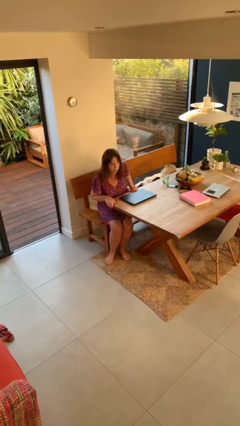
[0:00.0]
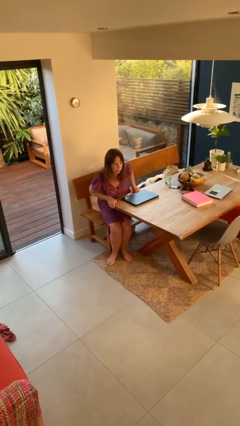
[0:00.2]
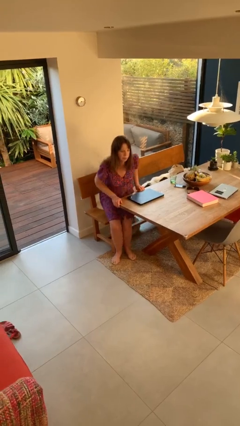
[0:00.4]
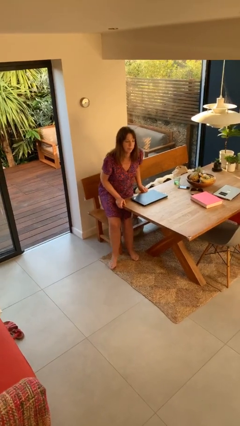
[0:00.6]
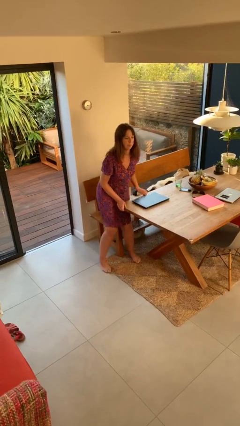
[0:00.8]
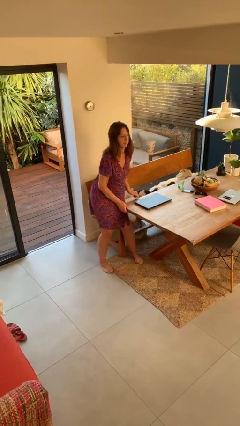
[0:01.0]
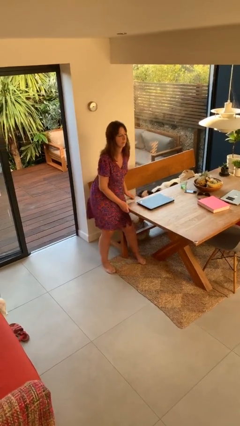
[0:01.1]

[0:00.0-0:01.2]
person stands up

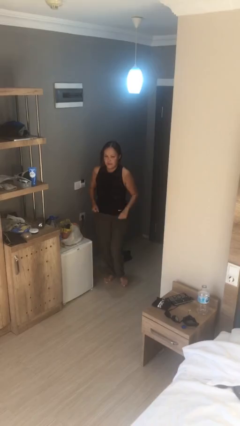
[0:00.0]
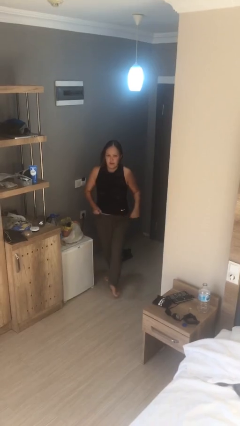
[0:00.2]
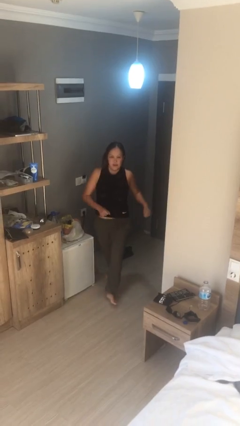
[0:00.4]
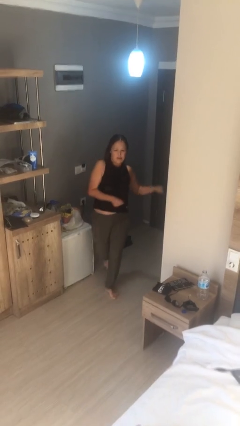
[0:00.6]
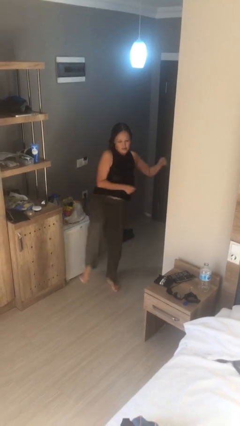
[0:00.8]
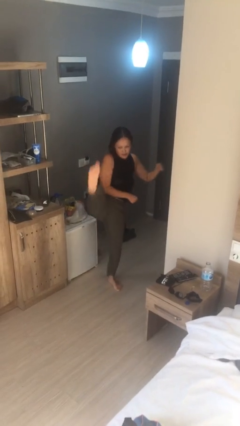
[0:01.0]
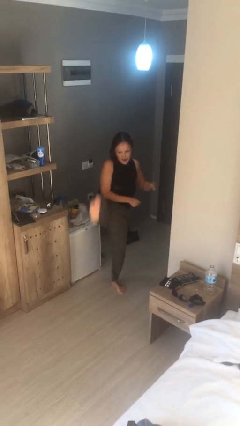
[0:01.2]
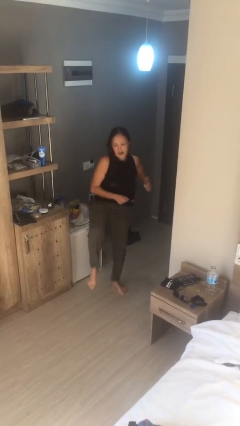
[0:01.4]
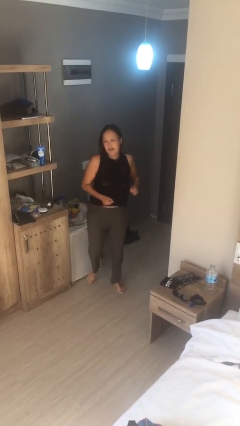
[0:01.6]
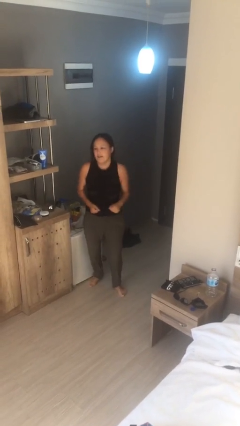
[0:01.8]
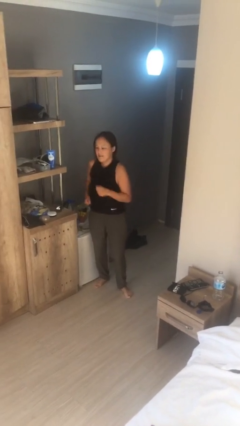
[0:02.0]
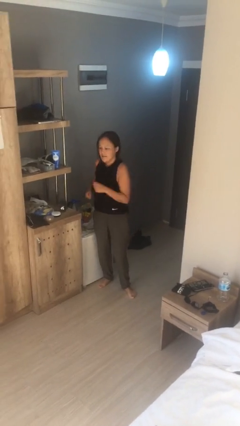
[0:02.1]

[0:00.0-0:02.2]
person karate kicks

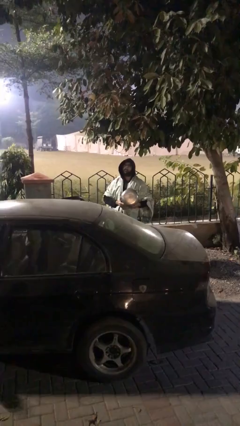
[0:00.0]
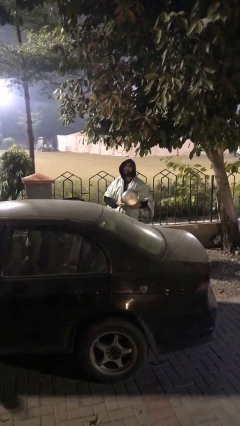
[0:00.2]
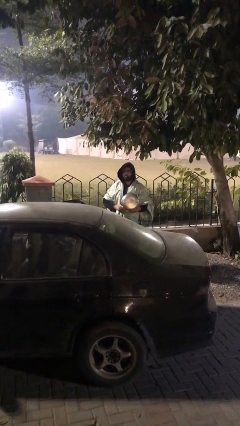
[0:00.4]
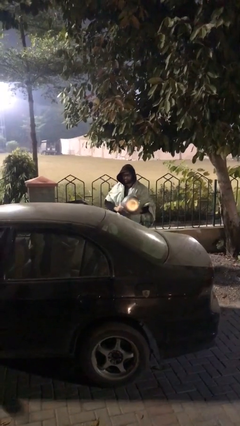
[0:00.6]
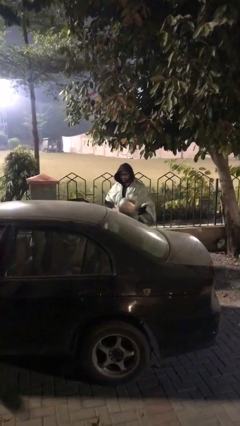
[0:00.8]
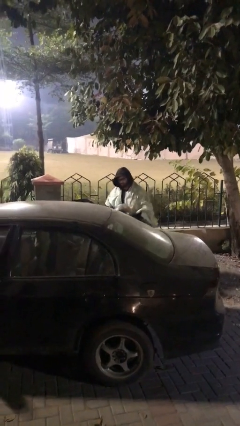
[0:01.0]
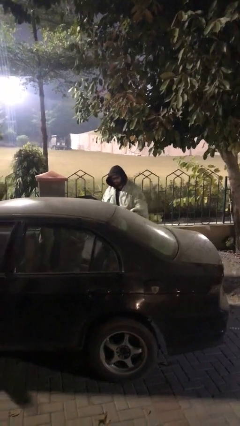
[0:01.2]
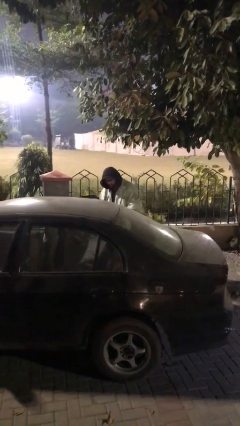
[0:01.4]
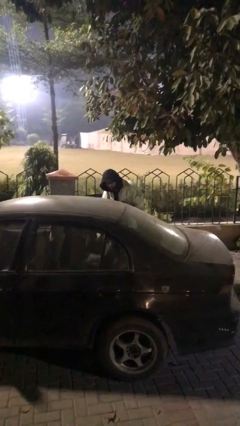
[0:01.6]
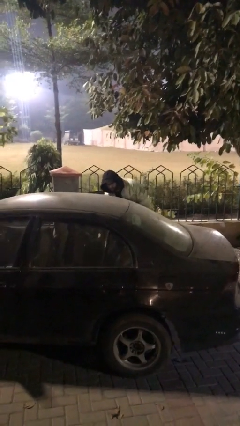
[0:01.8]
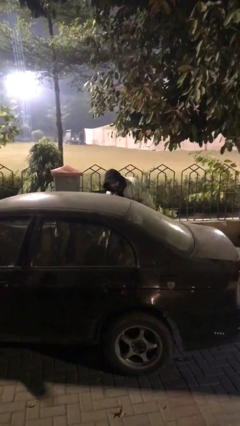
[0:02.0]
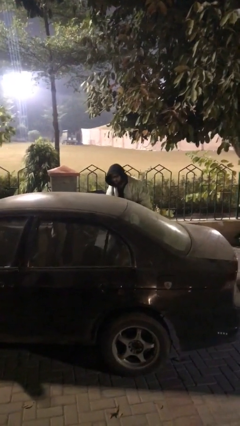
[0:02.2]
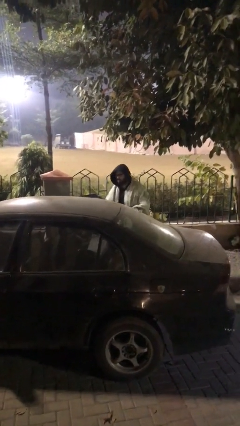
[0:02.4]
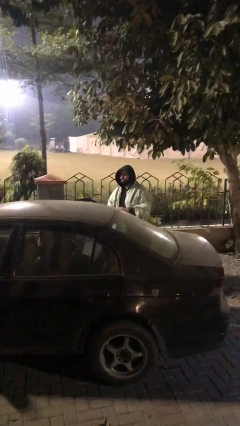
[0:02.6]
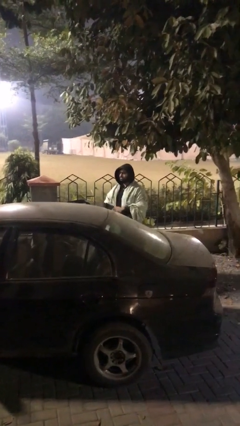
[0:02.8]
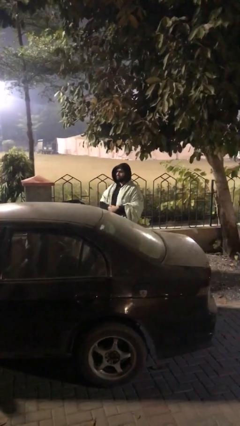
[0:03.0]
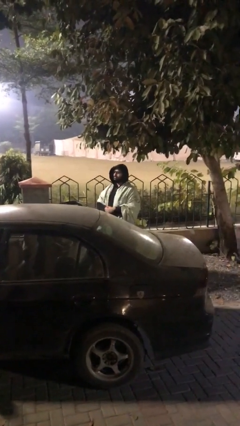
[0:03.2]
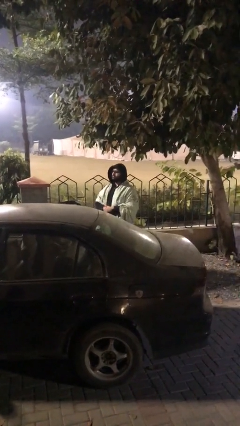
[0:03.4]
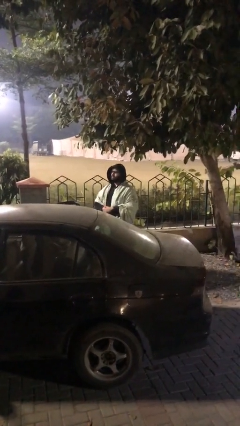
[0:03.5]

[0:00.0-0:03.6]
person loads car

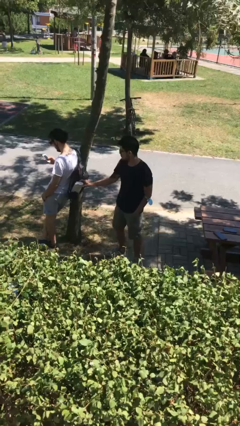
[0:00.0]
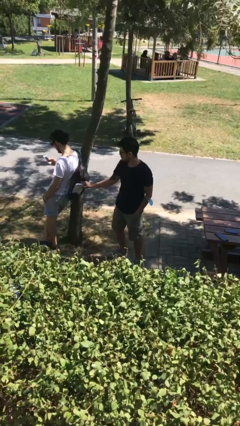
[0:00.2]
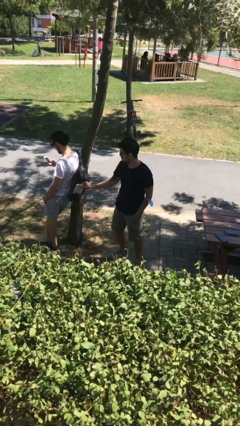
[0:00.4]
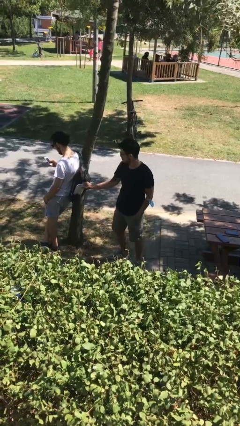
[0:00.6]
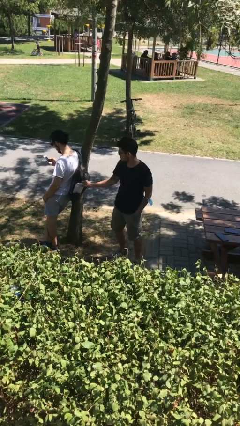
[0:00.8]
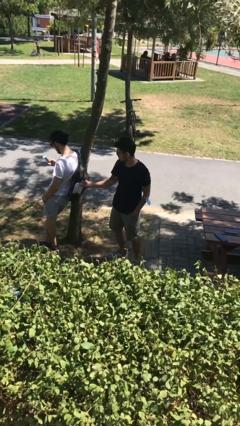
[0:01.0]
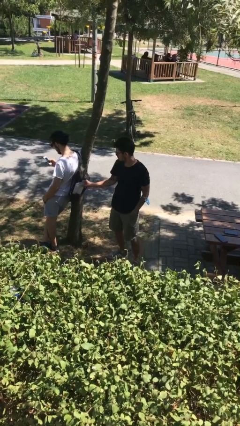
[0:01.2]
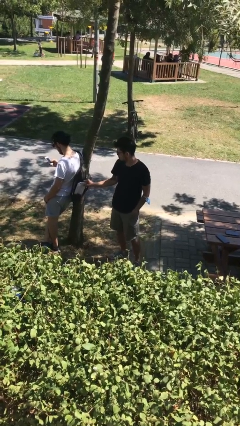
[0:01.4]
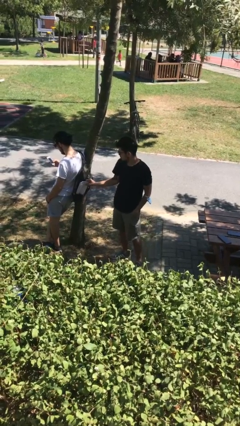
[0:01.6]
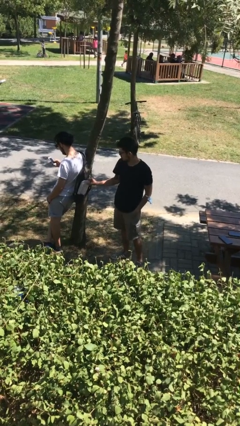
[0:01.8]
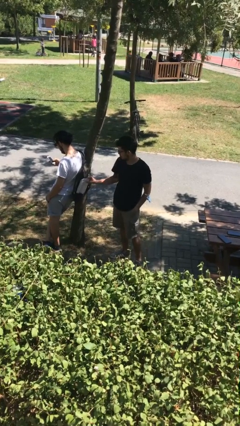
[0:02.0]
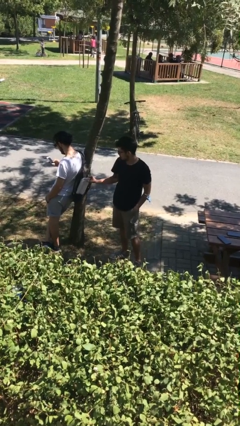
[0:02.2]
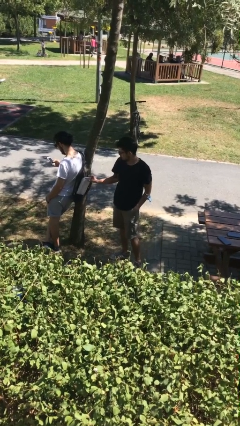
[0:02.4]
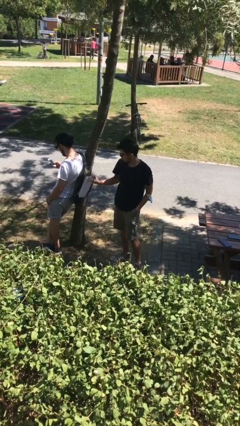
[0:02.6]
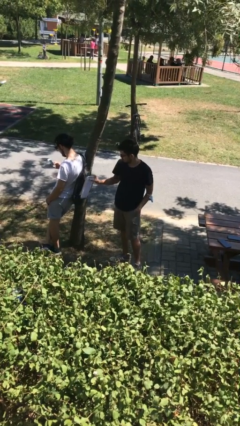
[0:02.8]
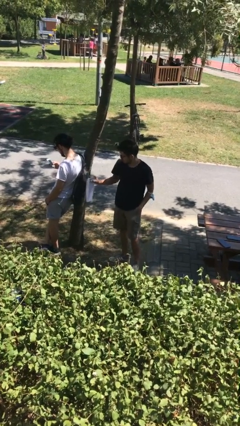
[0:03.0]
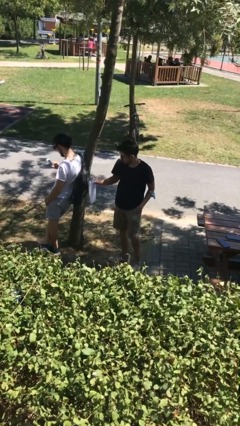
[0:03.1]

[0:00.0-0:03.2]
person steals object from person

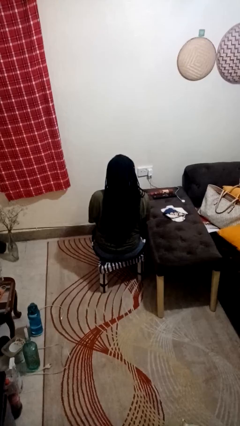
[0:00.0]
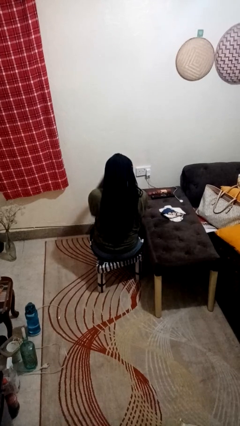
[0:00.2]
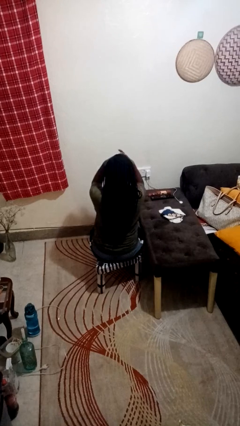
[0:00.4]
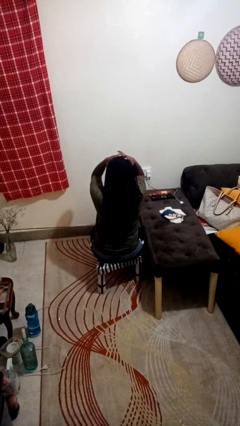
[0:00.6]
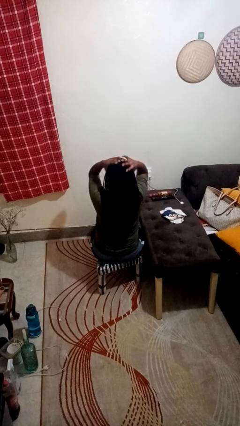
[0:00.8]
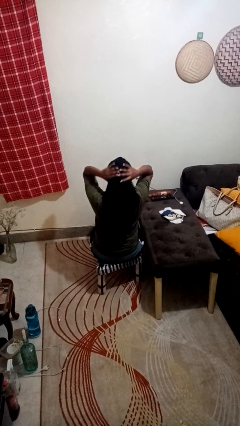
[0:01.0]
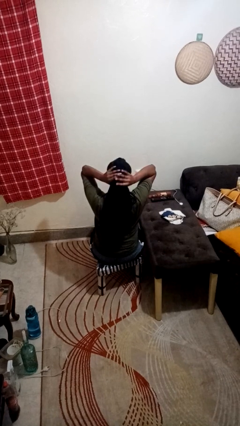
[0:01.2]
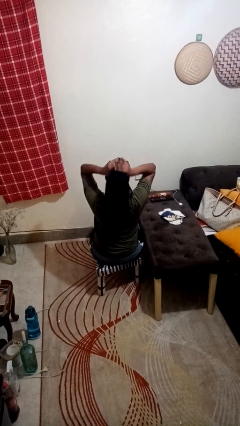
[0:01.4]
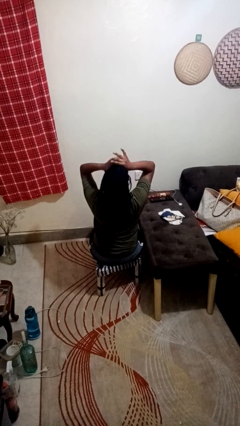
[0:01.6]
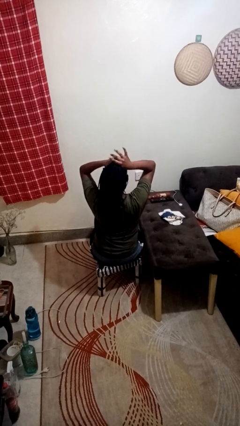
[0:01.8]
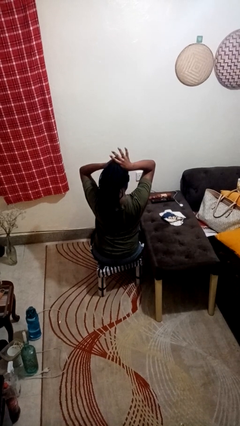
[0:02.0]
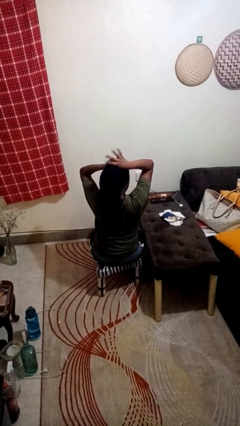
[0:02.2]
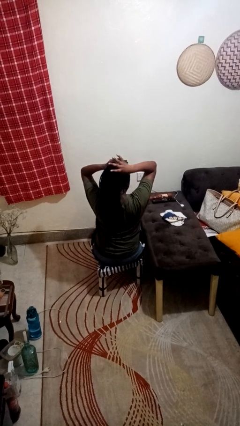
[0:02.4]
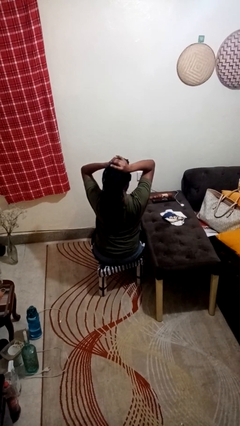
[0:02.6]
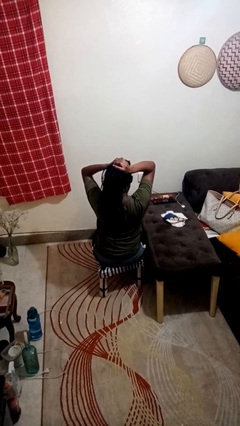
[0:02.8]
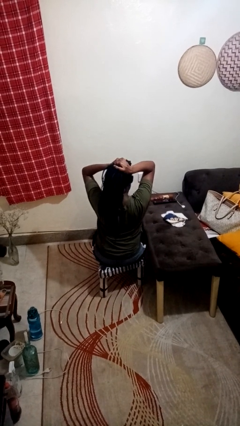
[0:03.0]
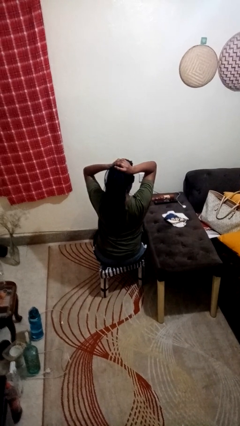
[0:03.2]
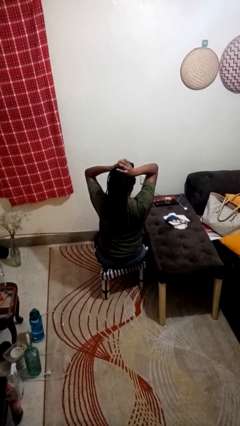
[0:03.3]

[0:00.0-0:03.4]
person puts hair in ponytail

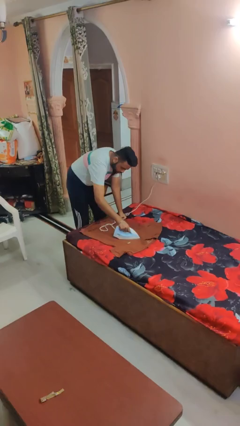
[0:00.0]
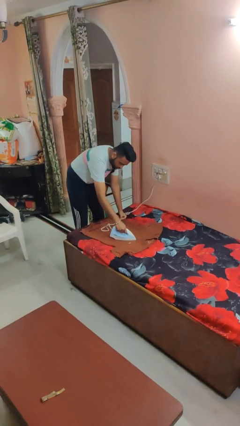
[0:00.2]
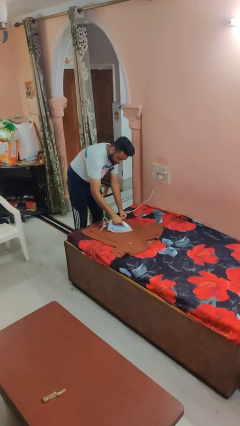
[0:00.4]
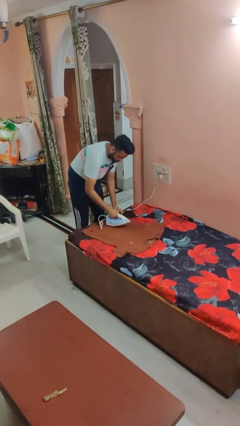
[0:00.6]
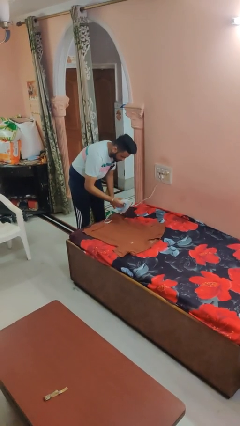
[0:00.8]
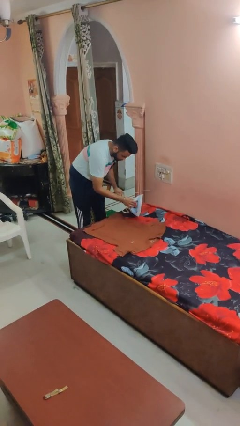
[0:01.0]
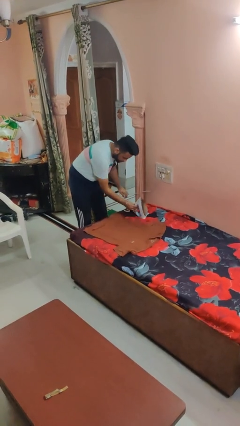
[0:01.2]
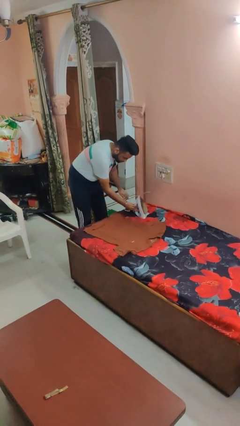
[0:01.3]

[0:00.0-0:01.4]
person irons clothes

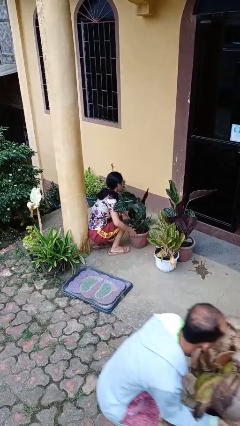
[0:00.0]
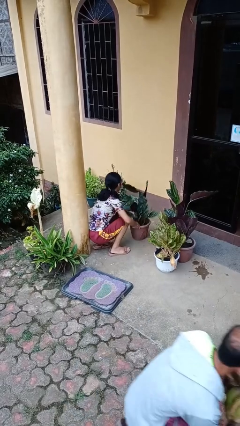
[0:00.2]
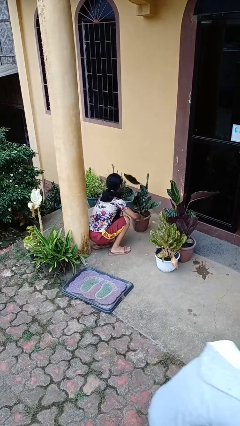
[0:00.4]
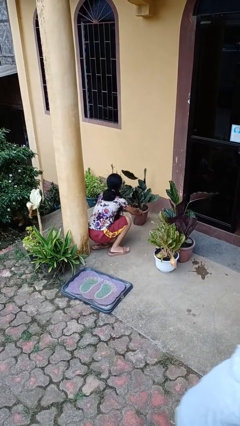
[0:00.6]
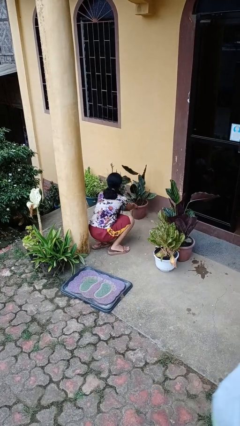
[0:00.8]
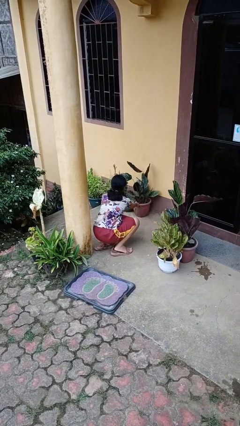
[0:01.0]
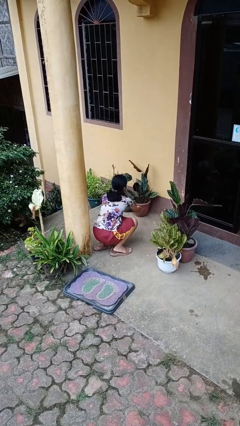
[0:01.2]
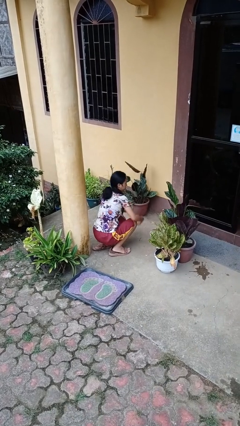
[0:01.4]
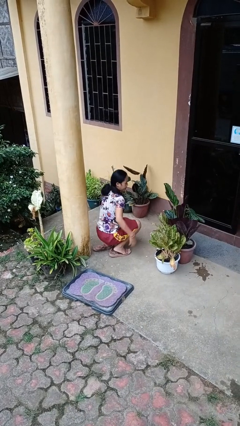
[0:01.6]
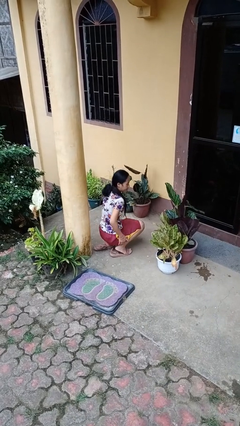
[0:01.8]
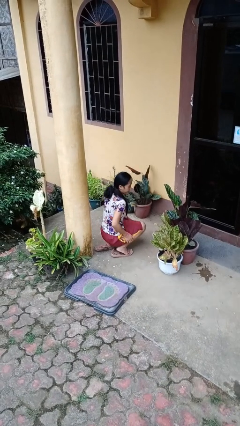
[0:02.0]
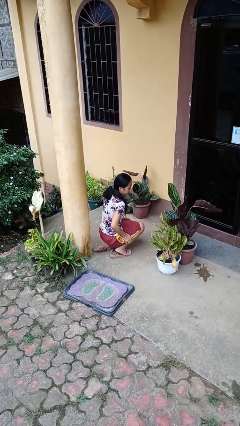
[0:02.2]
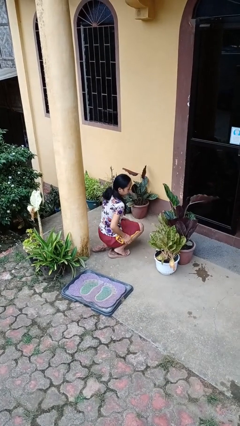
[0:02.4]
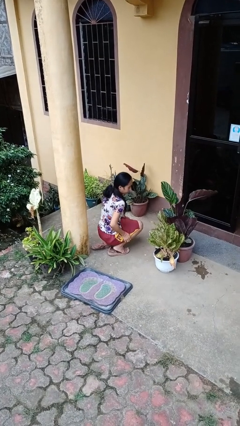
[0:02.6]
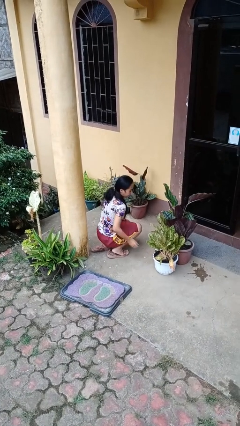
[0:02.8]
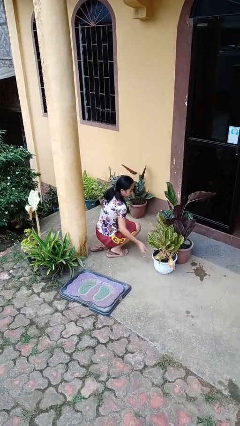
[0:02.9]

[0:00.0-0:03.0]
person arranges flowers in vase
